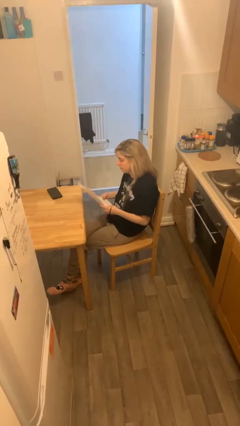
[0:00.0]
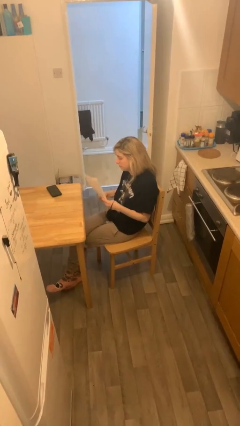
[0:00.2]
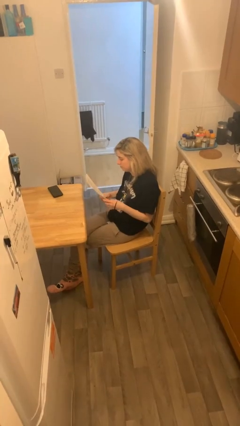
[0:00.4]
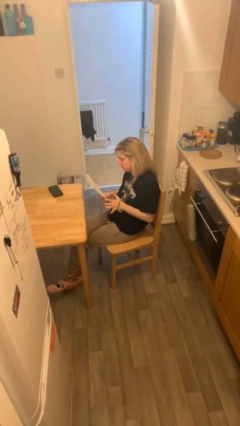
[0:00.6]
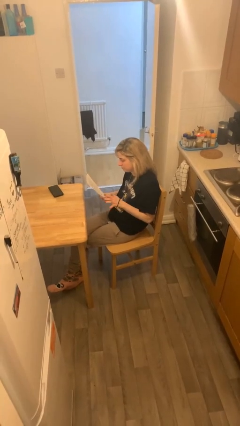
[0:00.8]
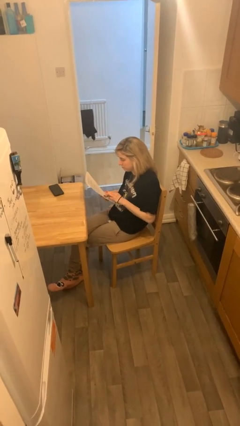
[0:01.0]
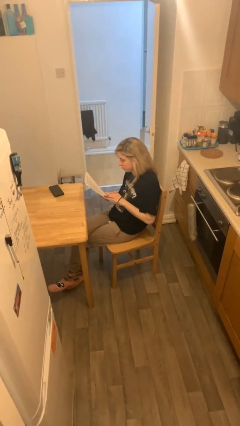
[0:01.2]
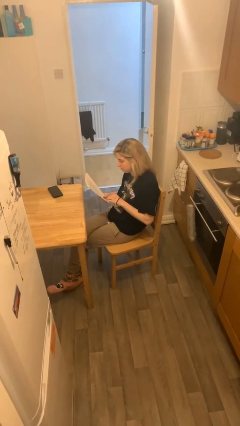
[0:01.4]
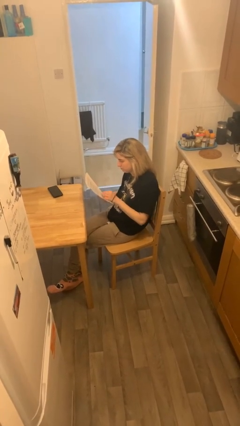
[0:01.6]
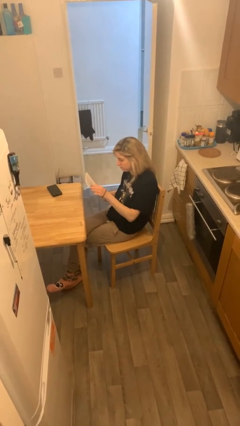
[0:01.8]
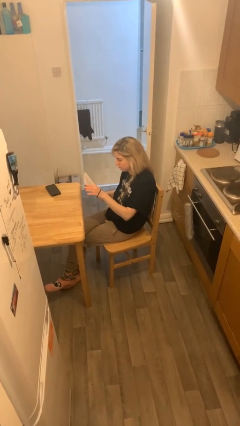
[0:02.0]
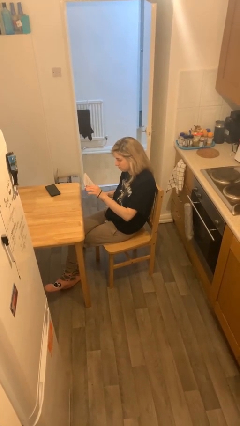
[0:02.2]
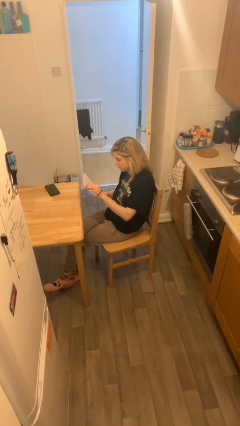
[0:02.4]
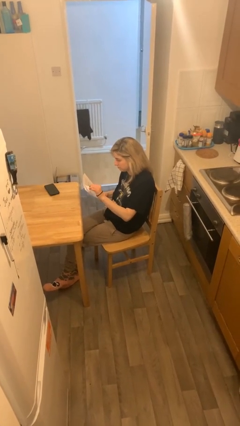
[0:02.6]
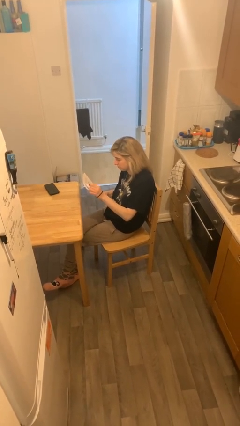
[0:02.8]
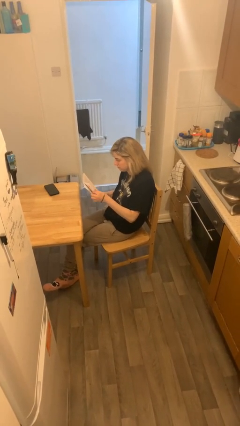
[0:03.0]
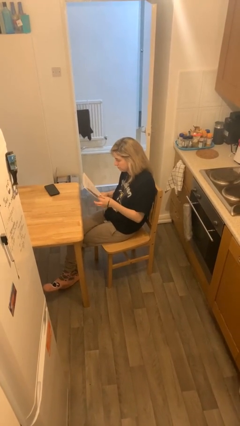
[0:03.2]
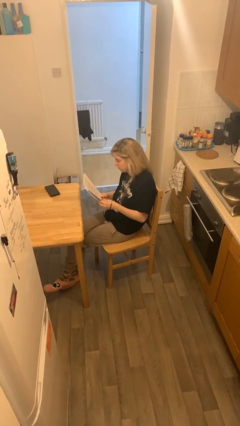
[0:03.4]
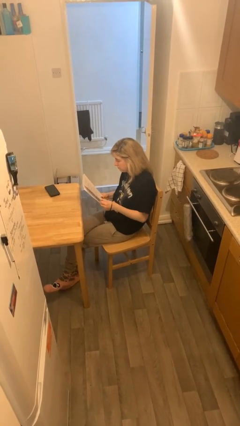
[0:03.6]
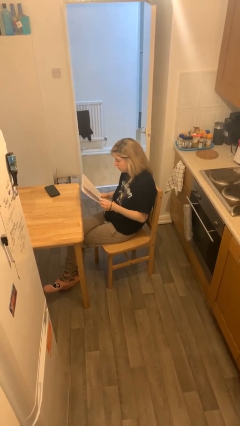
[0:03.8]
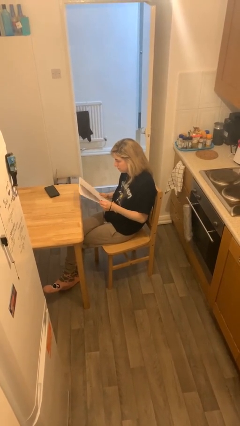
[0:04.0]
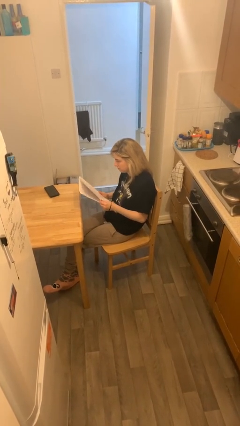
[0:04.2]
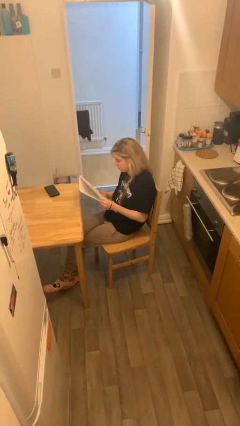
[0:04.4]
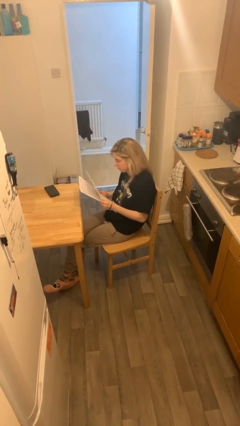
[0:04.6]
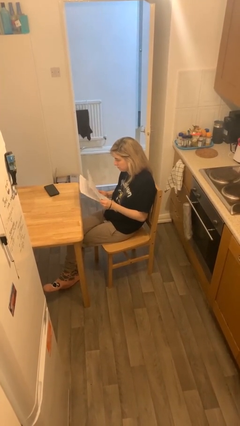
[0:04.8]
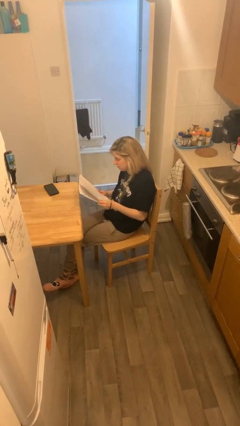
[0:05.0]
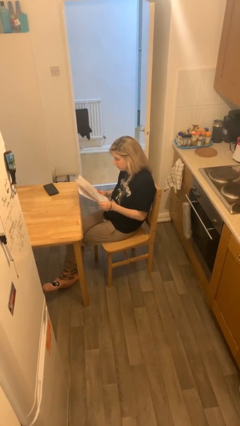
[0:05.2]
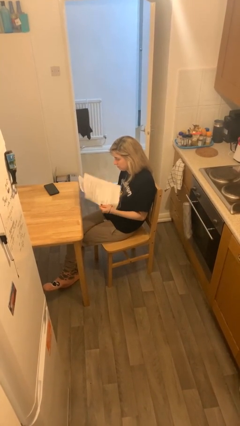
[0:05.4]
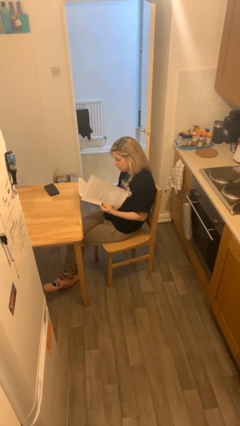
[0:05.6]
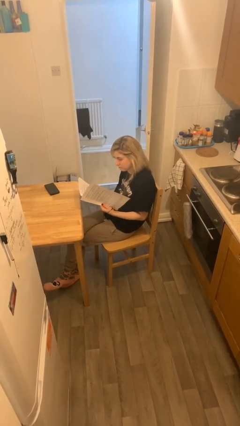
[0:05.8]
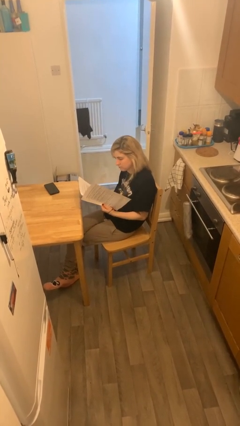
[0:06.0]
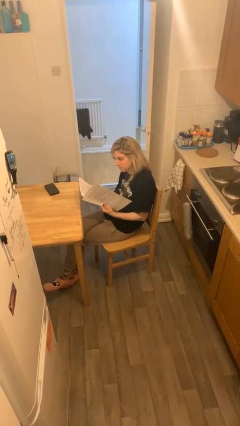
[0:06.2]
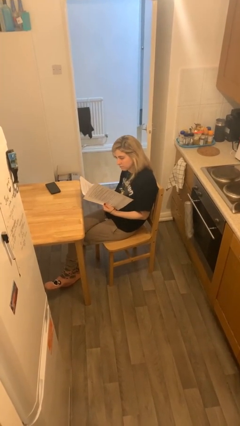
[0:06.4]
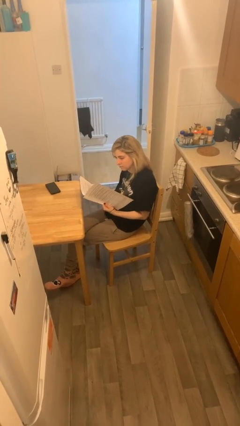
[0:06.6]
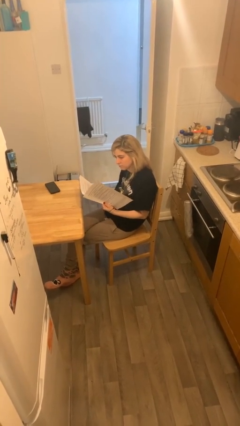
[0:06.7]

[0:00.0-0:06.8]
person reads document

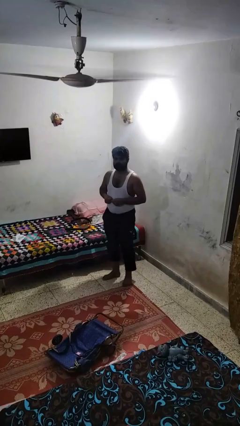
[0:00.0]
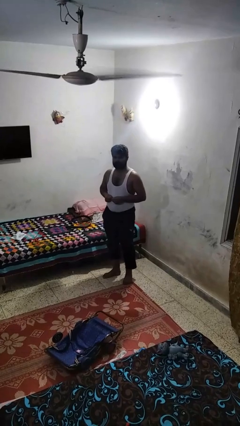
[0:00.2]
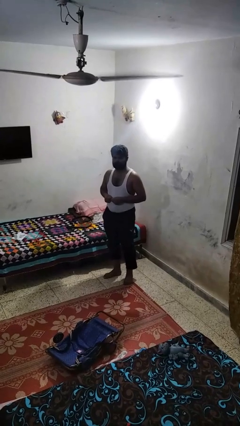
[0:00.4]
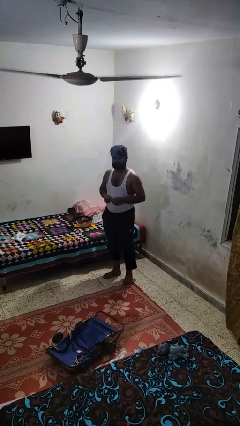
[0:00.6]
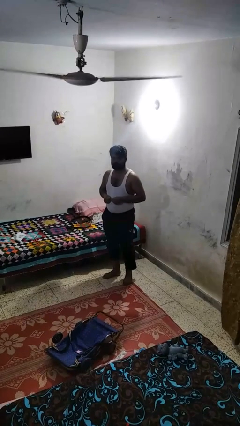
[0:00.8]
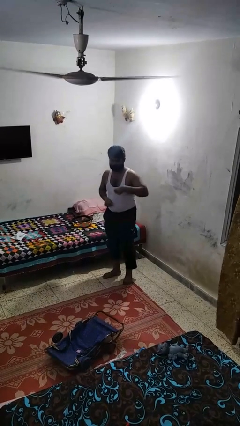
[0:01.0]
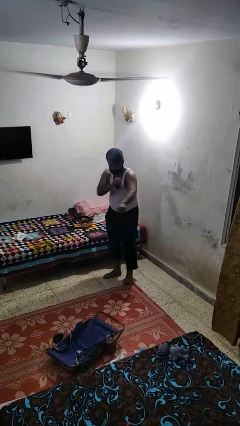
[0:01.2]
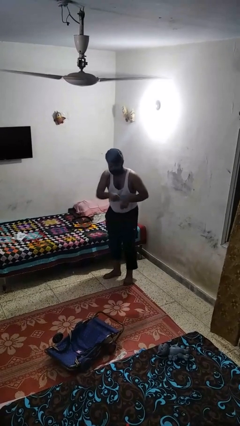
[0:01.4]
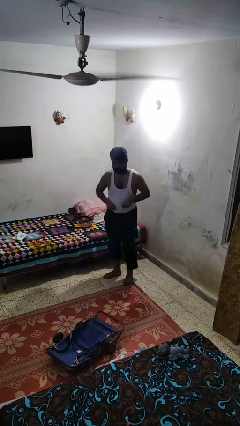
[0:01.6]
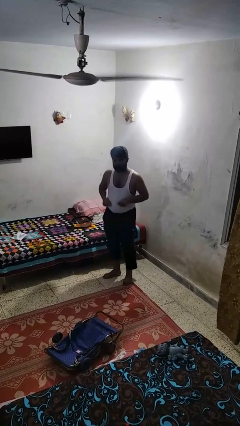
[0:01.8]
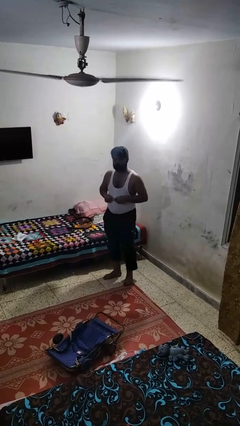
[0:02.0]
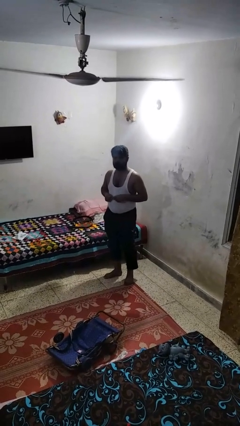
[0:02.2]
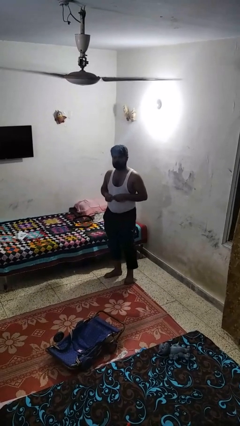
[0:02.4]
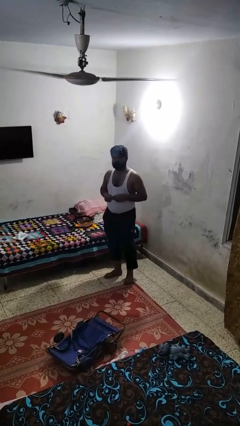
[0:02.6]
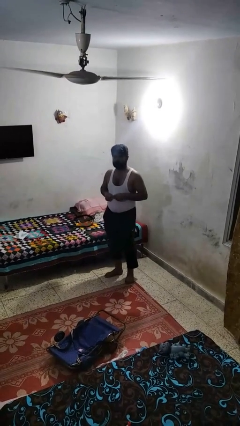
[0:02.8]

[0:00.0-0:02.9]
person karate chop

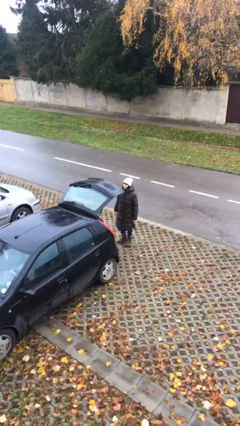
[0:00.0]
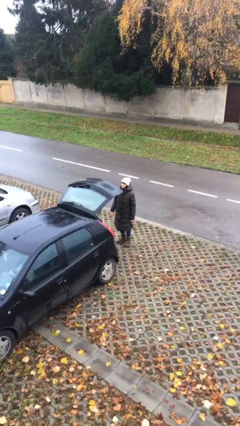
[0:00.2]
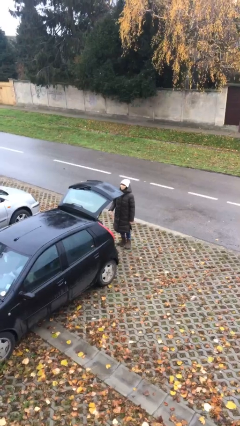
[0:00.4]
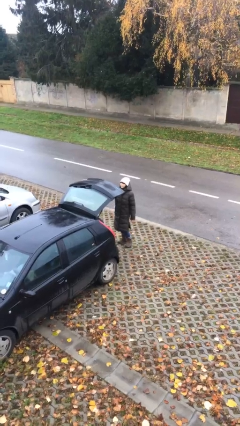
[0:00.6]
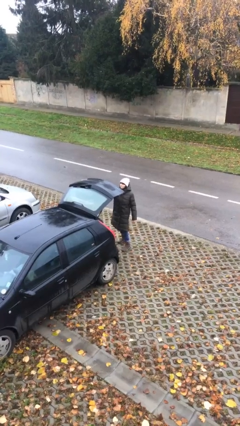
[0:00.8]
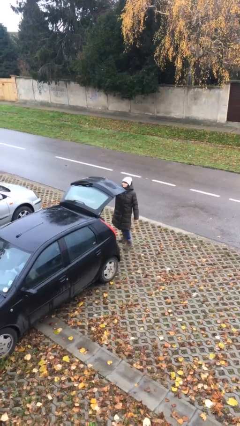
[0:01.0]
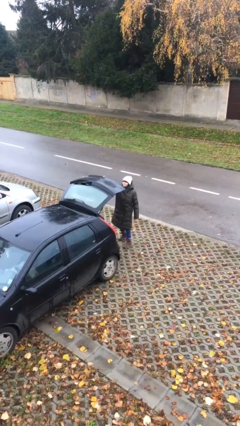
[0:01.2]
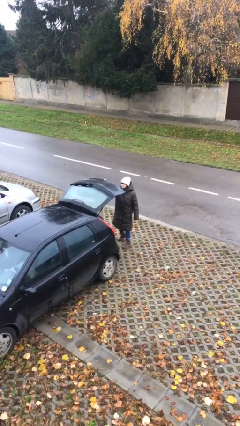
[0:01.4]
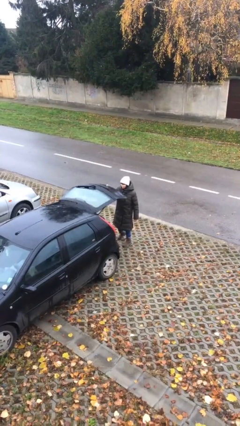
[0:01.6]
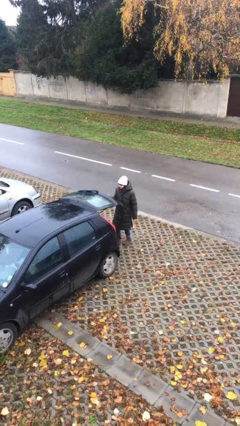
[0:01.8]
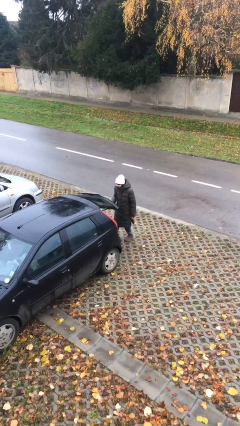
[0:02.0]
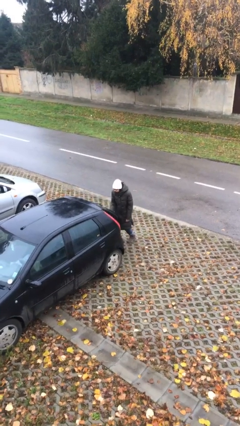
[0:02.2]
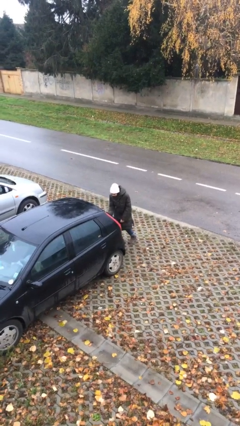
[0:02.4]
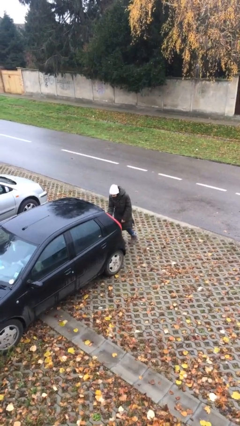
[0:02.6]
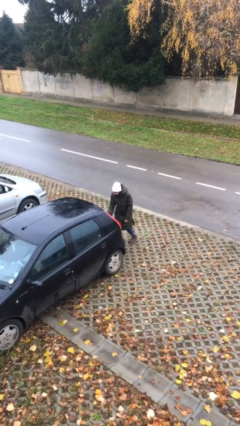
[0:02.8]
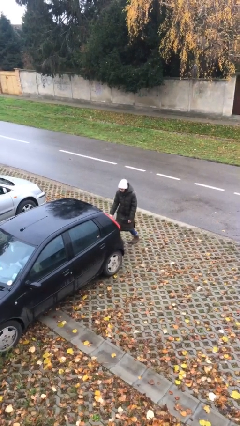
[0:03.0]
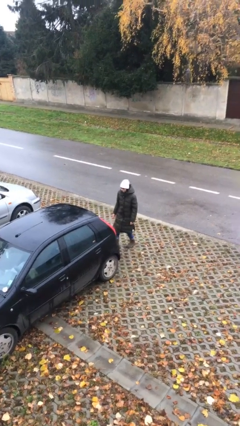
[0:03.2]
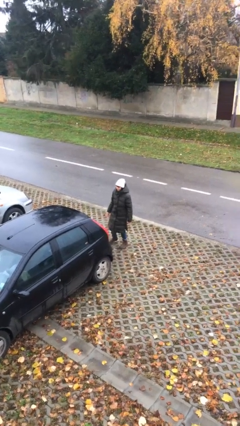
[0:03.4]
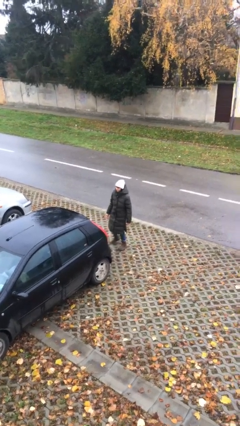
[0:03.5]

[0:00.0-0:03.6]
person closes car trunk

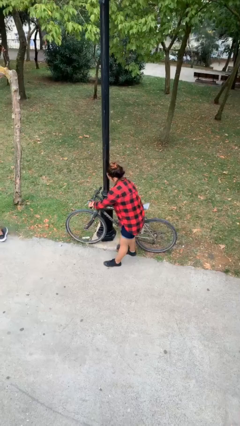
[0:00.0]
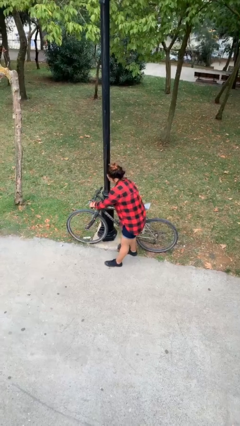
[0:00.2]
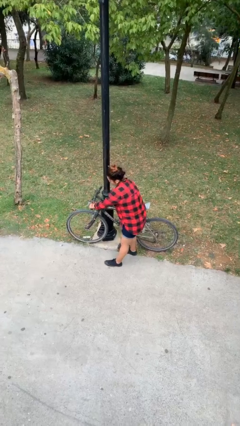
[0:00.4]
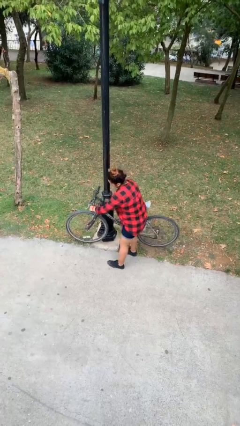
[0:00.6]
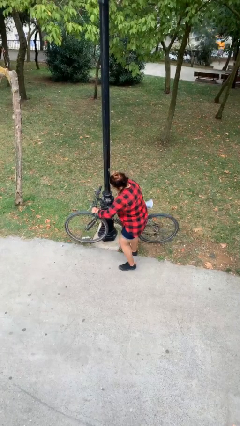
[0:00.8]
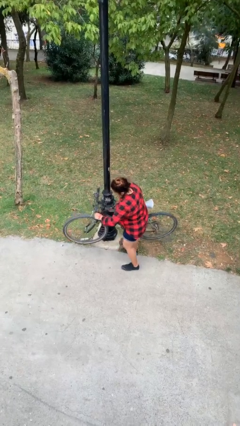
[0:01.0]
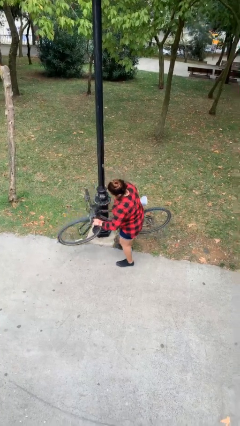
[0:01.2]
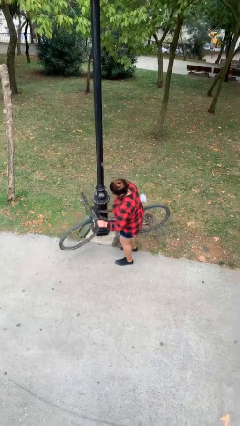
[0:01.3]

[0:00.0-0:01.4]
person picks up object from floor

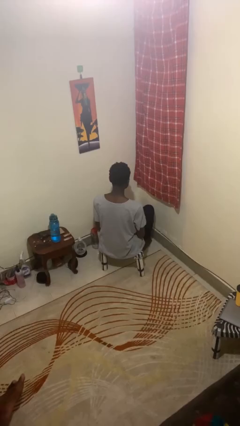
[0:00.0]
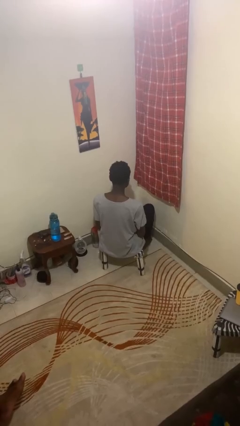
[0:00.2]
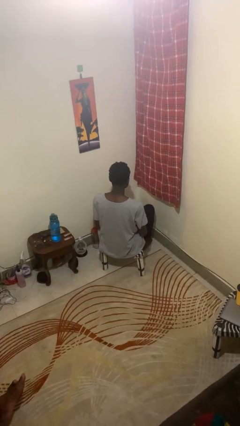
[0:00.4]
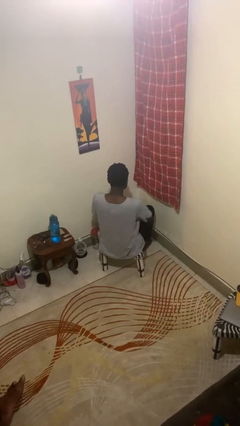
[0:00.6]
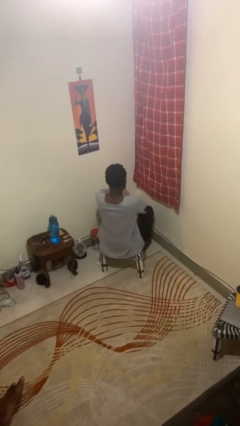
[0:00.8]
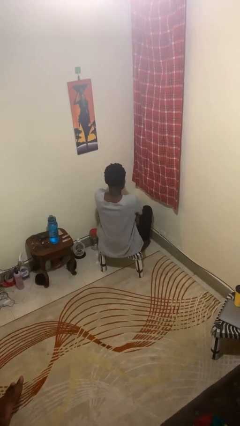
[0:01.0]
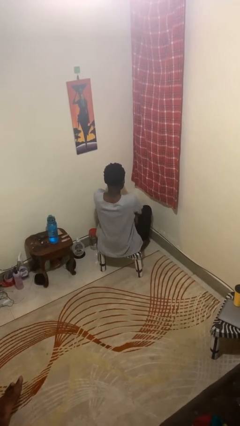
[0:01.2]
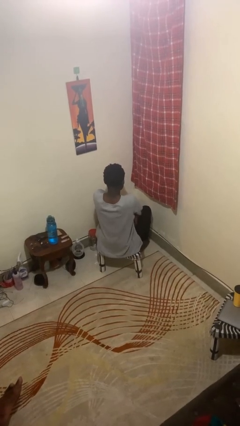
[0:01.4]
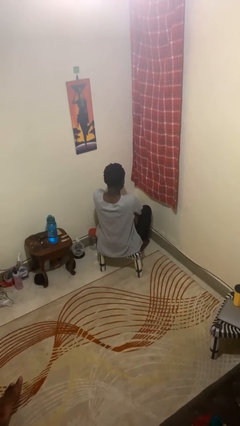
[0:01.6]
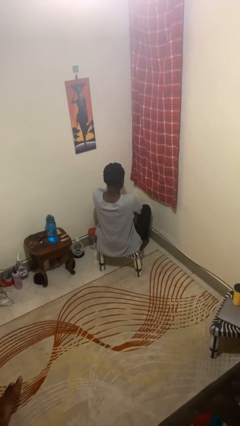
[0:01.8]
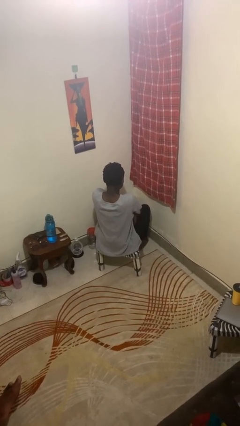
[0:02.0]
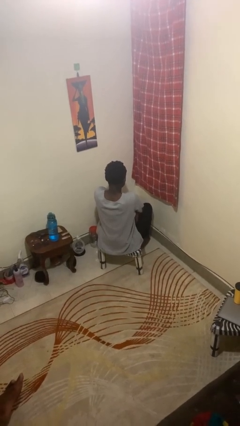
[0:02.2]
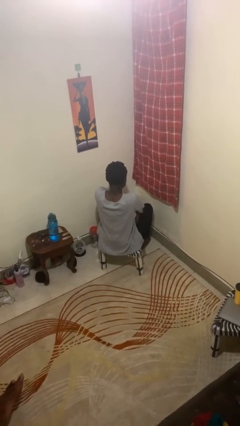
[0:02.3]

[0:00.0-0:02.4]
person crosses arms

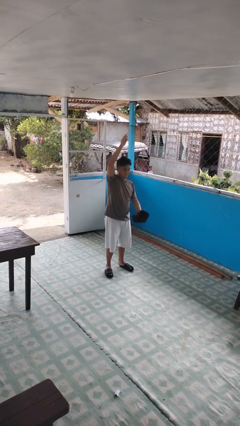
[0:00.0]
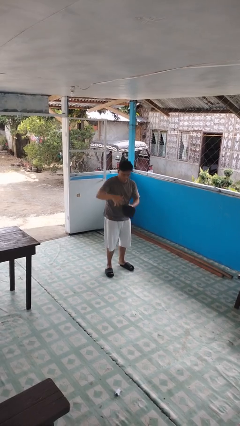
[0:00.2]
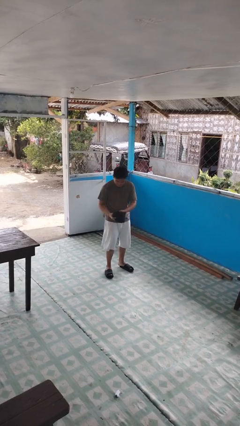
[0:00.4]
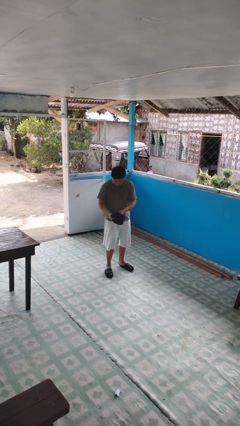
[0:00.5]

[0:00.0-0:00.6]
person catches dropped object
